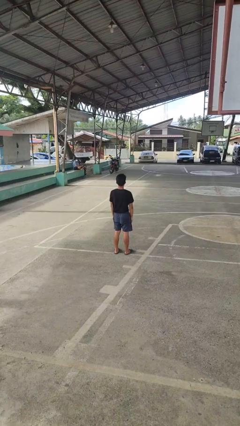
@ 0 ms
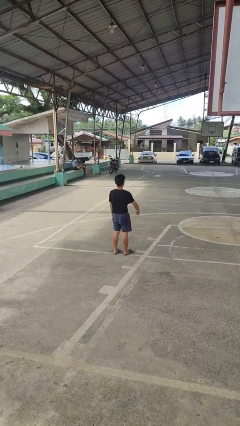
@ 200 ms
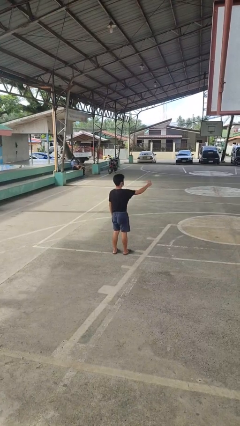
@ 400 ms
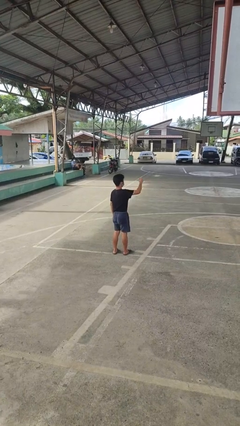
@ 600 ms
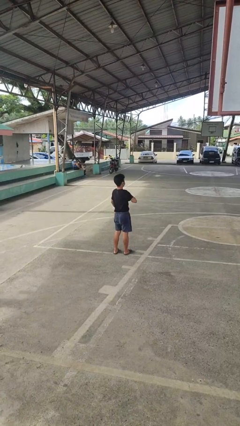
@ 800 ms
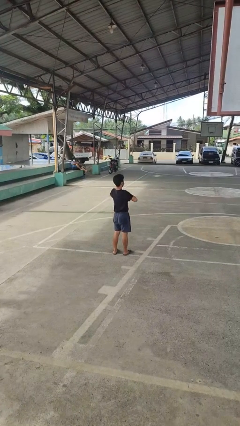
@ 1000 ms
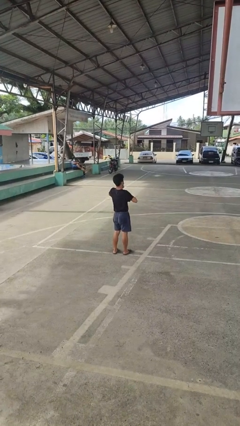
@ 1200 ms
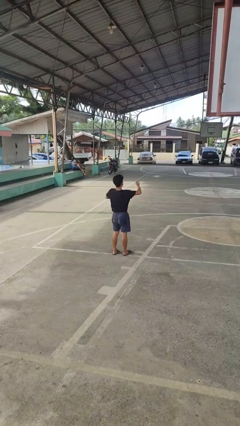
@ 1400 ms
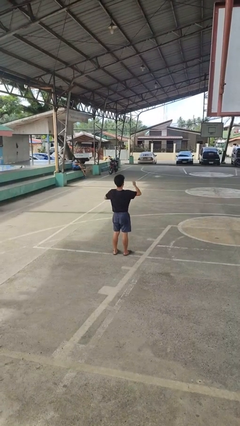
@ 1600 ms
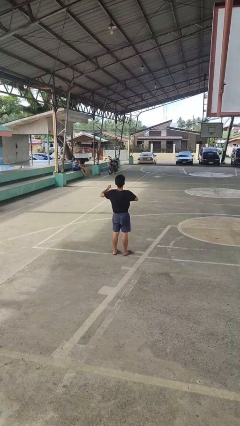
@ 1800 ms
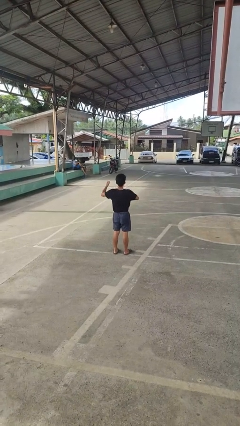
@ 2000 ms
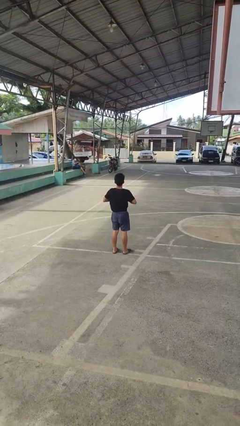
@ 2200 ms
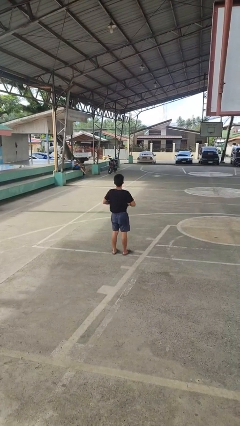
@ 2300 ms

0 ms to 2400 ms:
person drums on chest

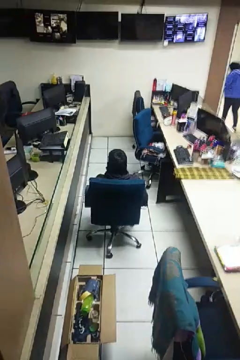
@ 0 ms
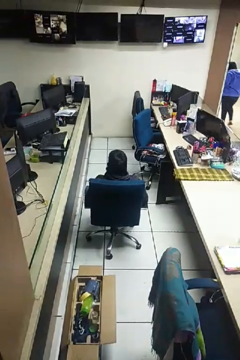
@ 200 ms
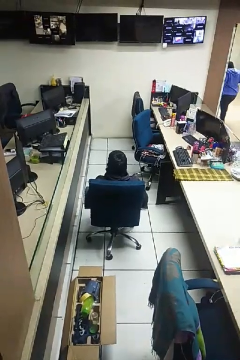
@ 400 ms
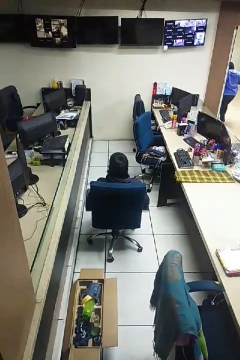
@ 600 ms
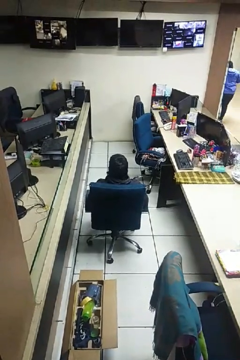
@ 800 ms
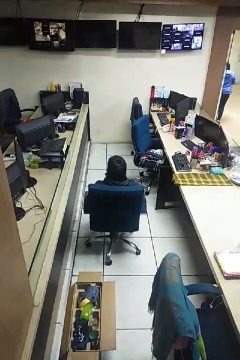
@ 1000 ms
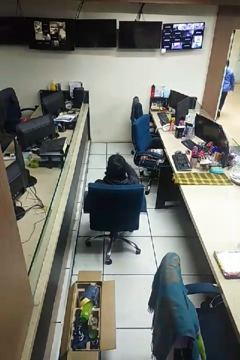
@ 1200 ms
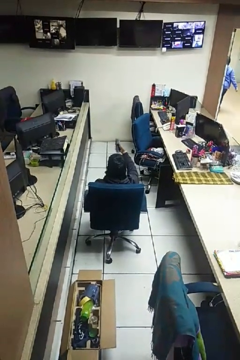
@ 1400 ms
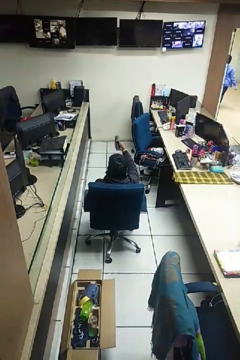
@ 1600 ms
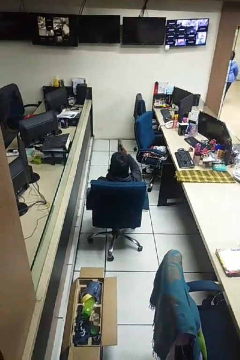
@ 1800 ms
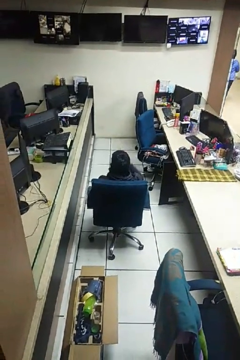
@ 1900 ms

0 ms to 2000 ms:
person uses television remote

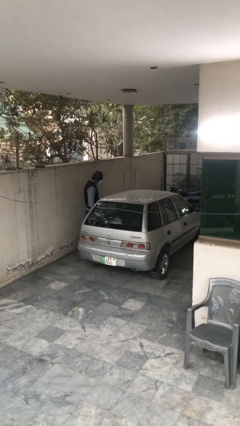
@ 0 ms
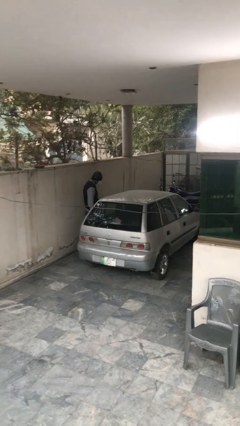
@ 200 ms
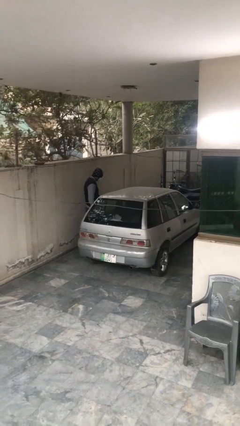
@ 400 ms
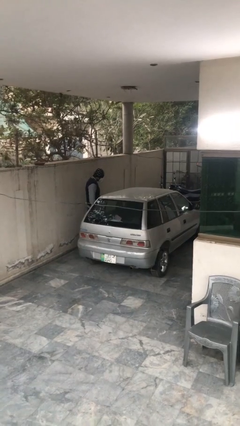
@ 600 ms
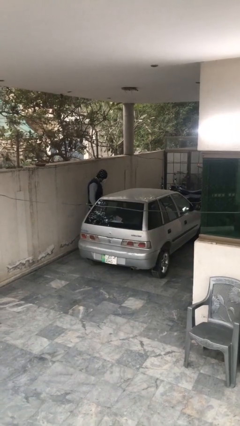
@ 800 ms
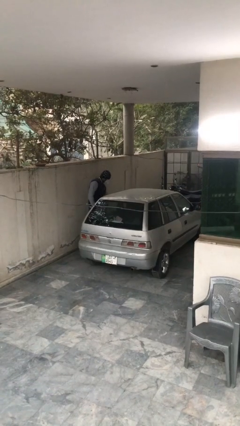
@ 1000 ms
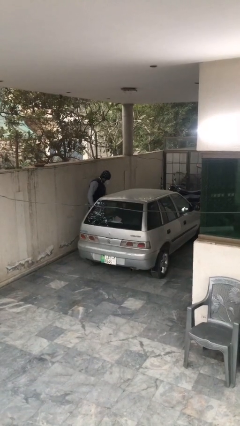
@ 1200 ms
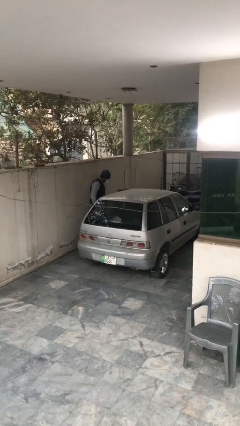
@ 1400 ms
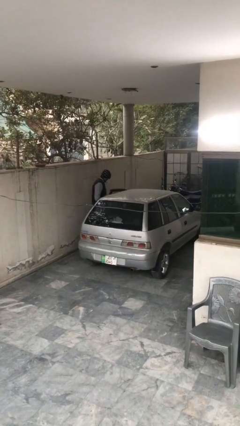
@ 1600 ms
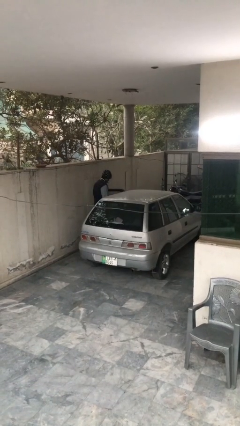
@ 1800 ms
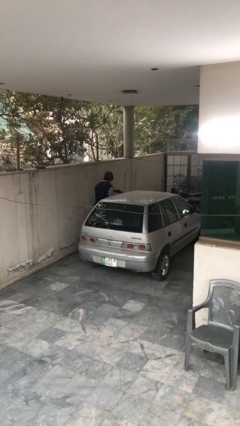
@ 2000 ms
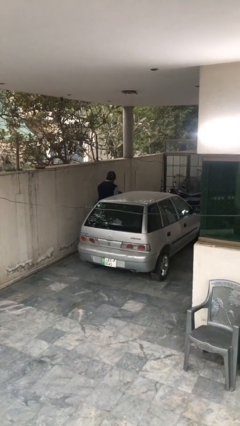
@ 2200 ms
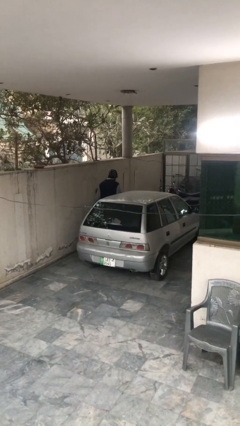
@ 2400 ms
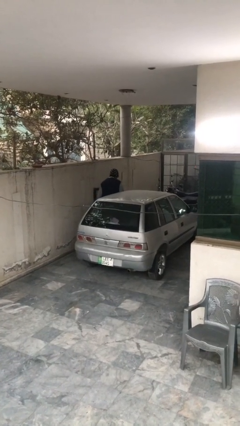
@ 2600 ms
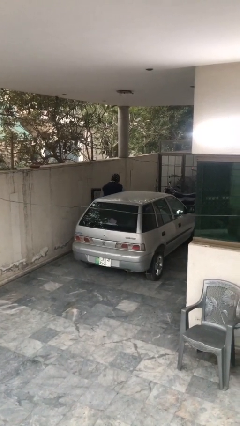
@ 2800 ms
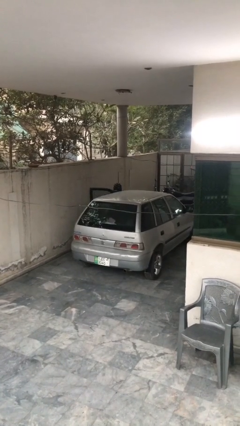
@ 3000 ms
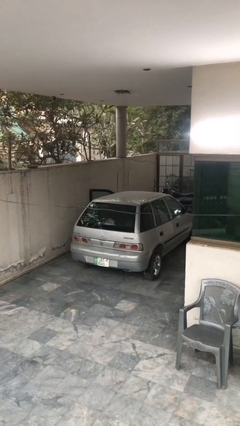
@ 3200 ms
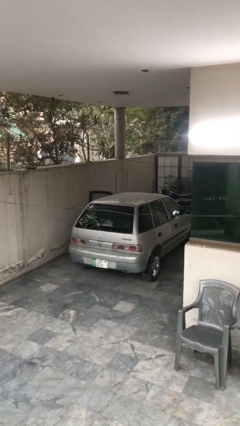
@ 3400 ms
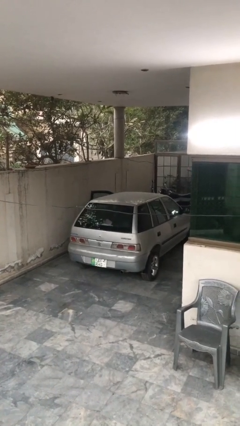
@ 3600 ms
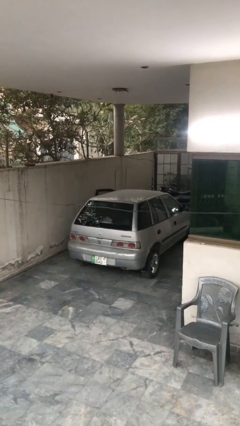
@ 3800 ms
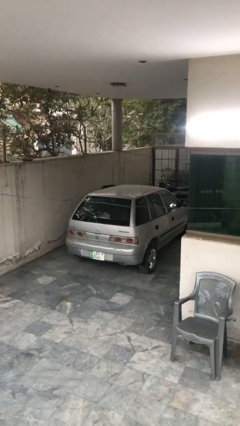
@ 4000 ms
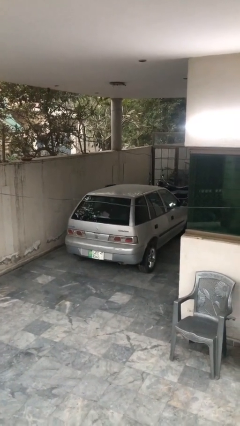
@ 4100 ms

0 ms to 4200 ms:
car picks up person

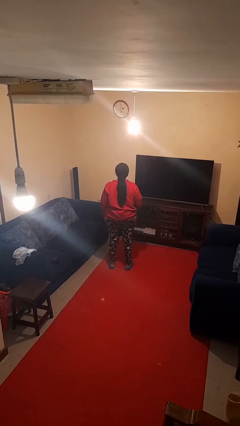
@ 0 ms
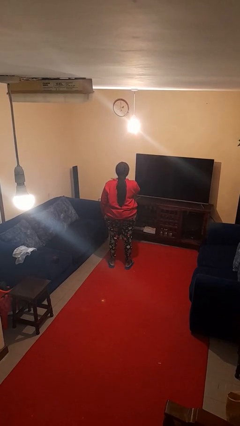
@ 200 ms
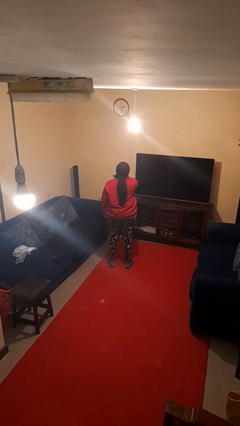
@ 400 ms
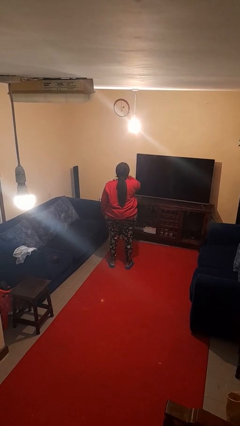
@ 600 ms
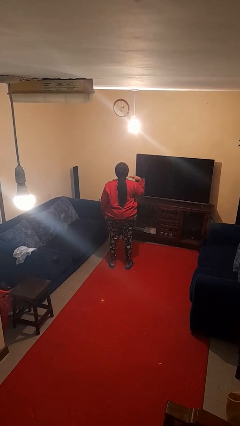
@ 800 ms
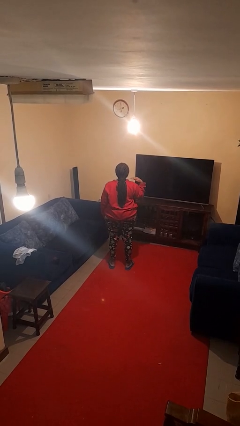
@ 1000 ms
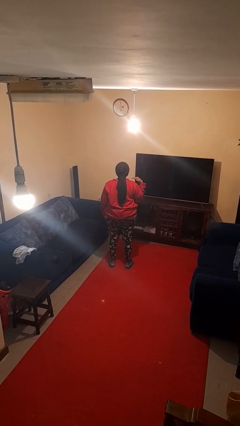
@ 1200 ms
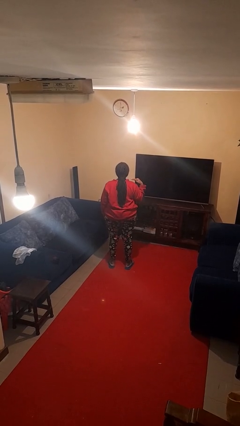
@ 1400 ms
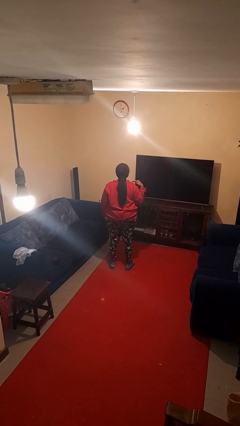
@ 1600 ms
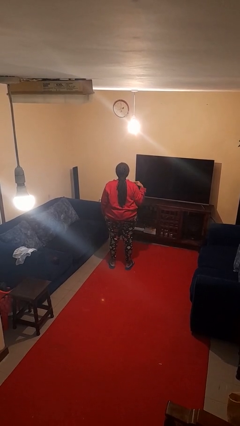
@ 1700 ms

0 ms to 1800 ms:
person gestures cut

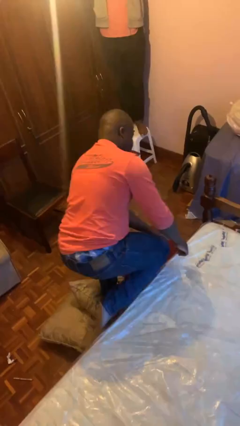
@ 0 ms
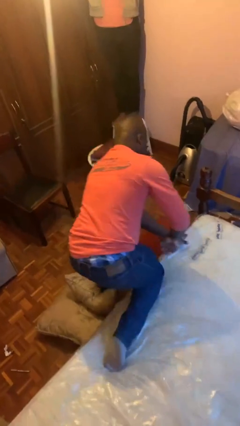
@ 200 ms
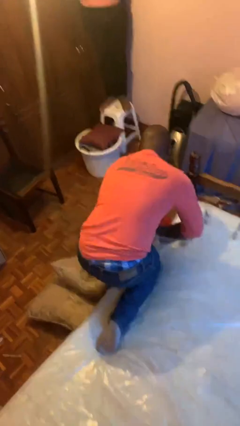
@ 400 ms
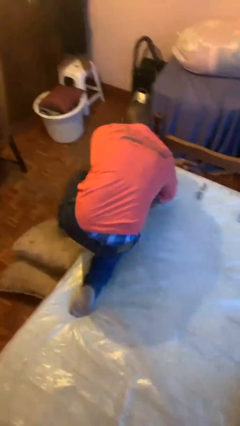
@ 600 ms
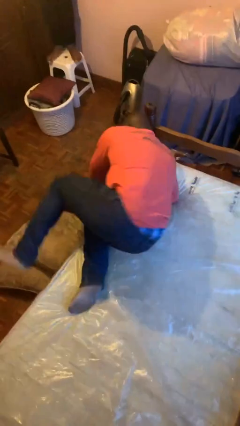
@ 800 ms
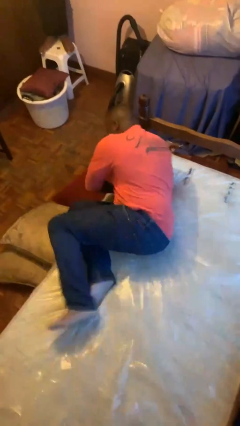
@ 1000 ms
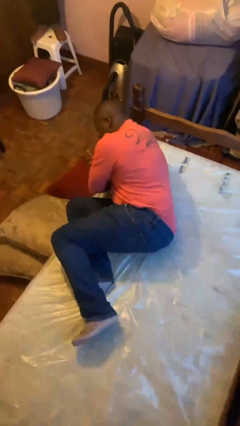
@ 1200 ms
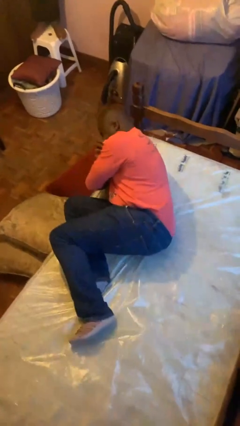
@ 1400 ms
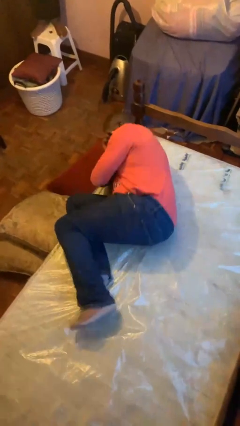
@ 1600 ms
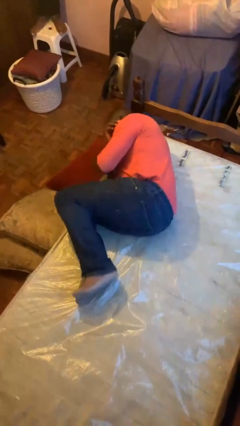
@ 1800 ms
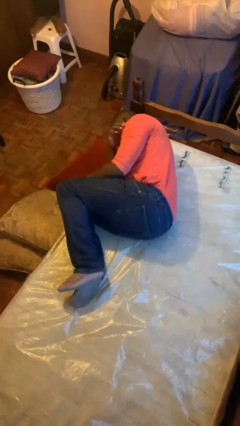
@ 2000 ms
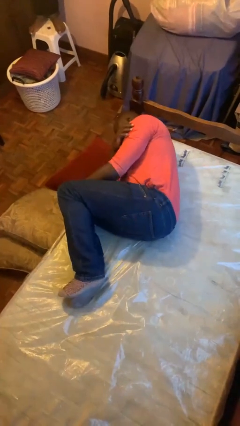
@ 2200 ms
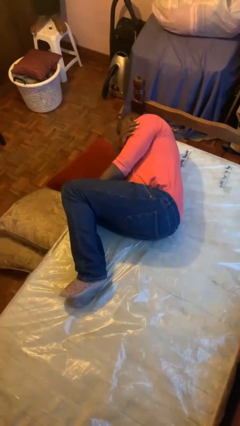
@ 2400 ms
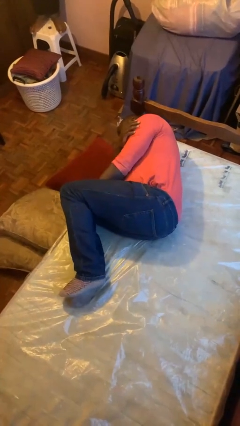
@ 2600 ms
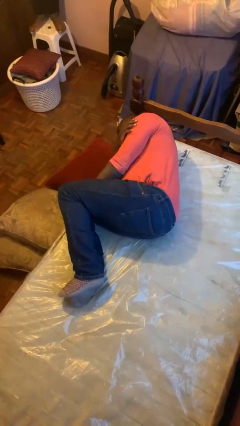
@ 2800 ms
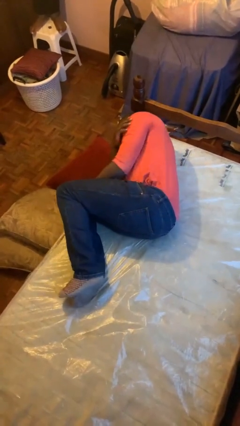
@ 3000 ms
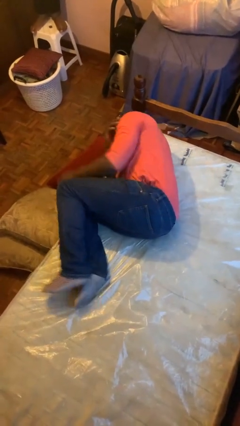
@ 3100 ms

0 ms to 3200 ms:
person lies down on bed

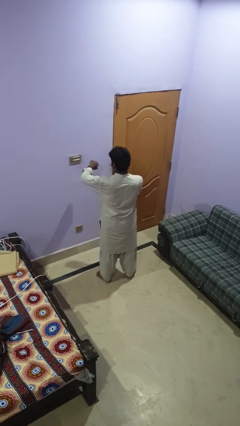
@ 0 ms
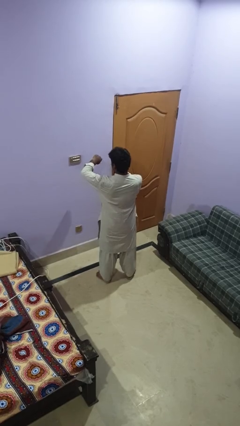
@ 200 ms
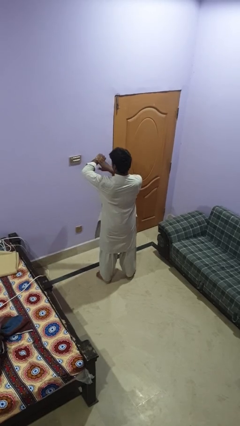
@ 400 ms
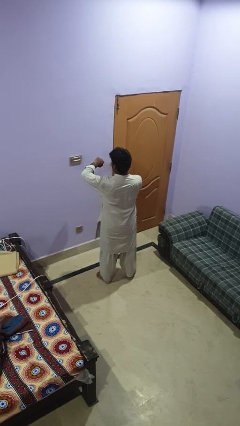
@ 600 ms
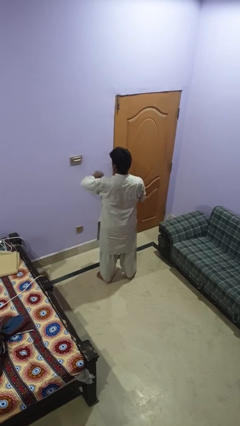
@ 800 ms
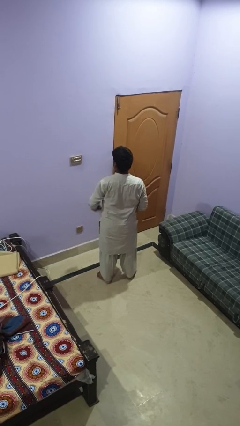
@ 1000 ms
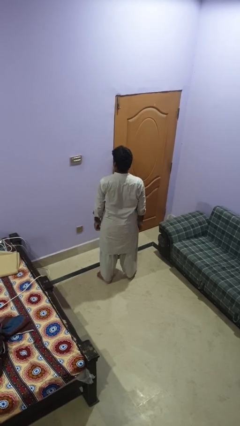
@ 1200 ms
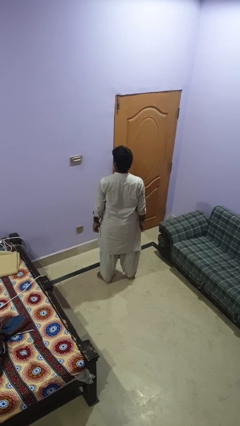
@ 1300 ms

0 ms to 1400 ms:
person swats bug

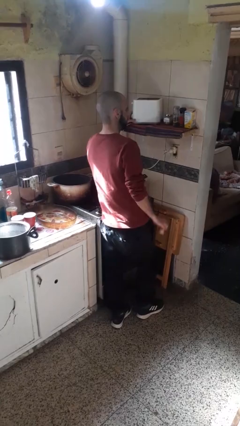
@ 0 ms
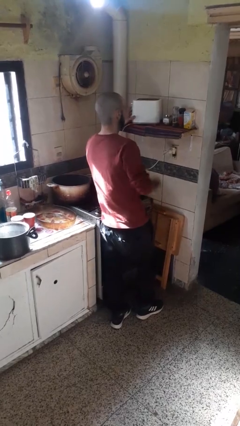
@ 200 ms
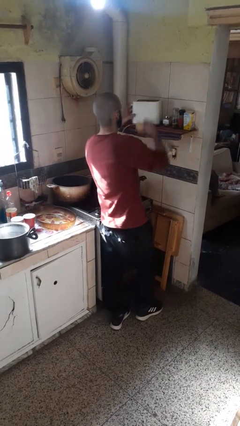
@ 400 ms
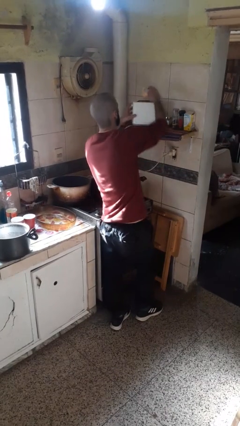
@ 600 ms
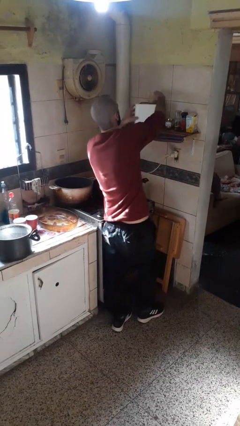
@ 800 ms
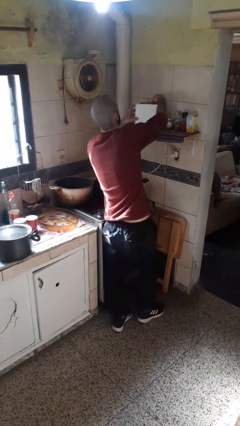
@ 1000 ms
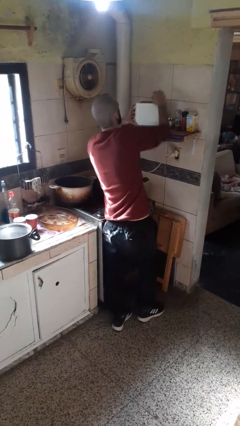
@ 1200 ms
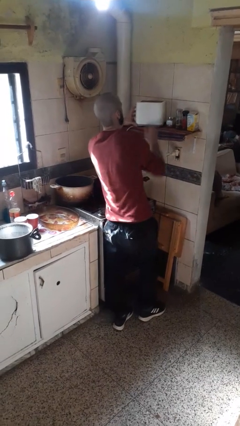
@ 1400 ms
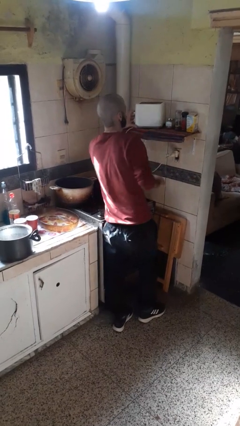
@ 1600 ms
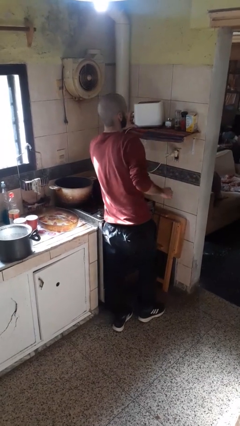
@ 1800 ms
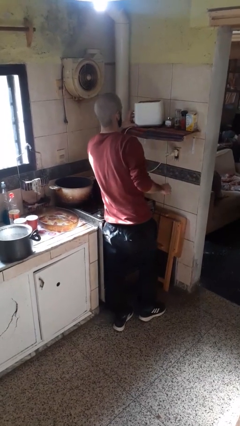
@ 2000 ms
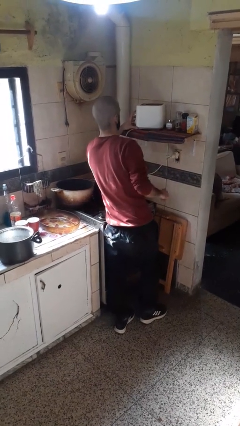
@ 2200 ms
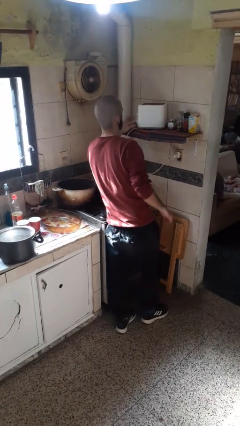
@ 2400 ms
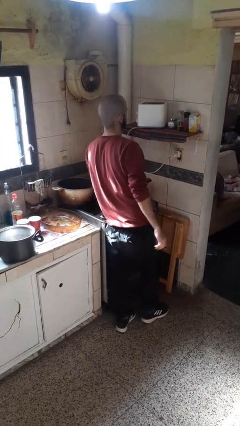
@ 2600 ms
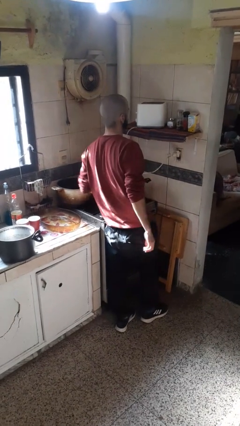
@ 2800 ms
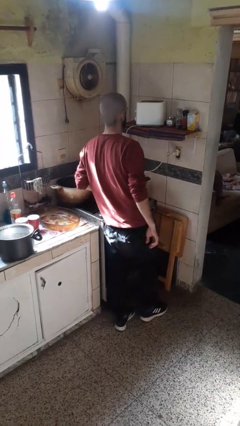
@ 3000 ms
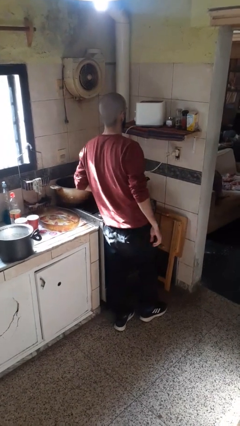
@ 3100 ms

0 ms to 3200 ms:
person puts object into toaster
